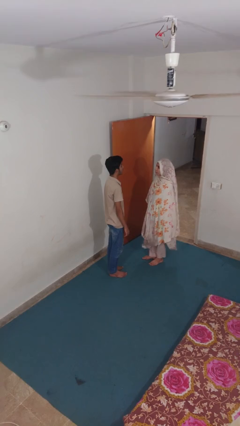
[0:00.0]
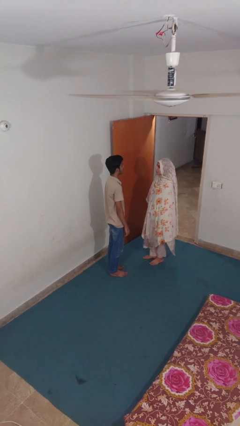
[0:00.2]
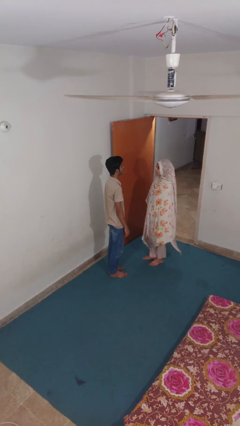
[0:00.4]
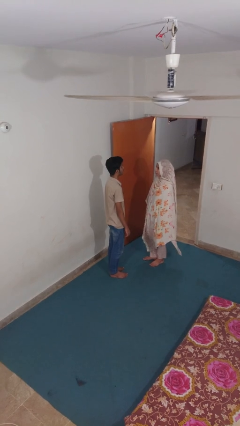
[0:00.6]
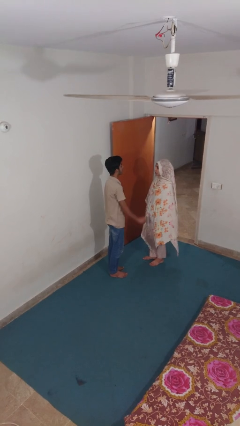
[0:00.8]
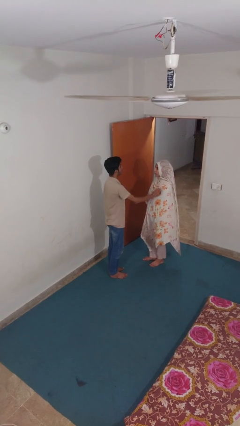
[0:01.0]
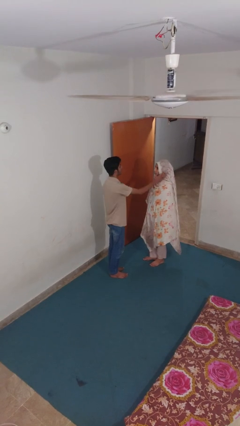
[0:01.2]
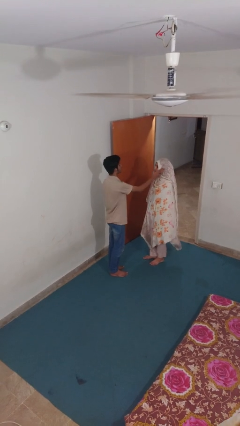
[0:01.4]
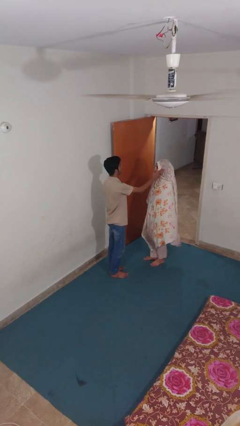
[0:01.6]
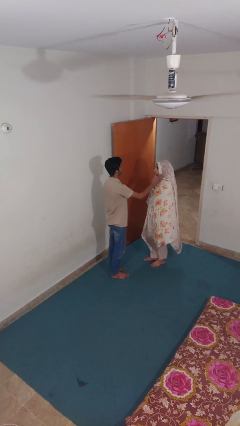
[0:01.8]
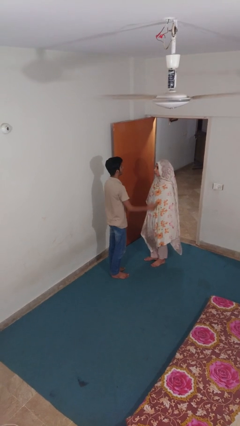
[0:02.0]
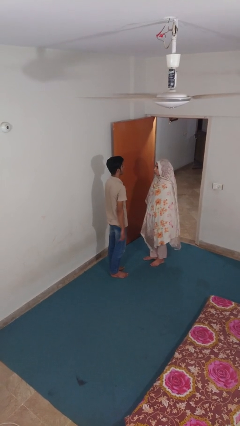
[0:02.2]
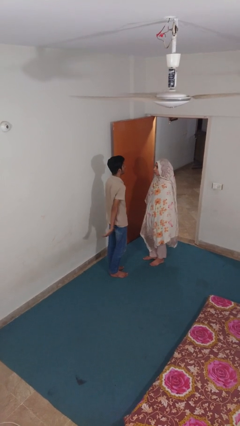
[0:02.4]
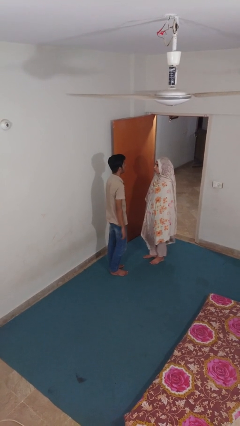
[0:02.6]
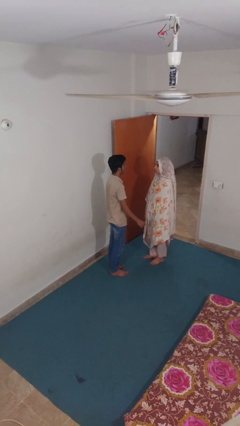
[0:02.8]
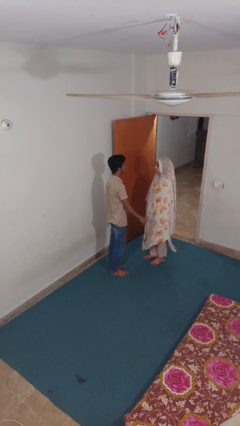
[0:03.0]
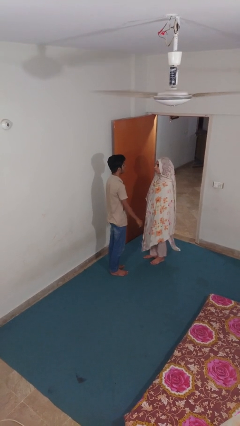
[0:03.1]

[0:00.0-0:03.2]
person touches face of person

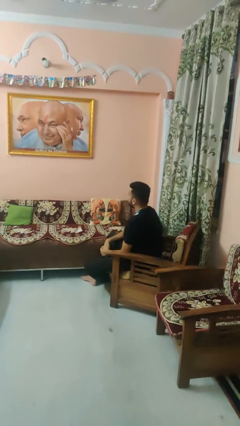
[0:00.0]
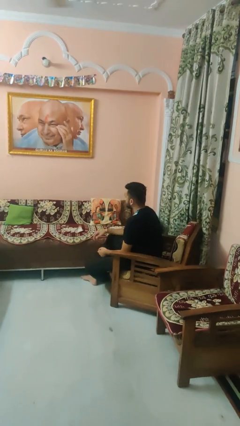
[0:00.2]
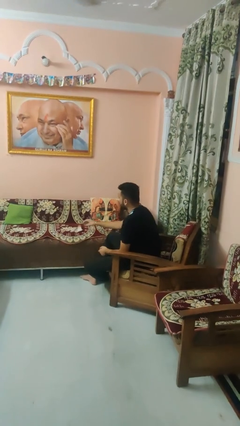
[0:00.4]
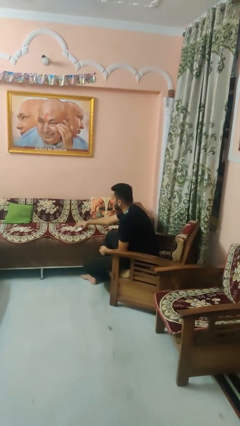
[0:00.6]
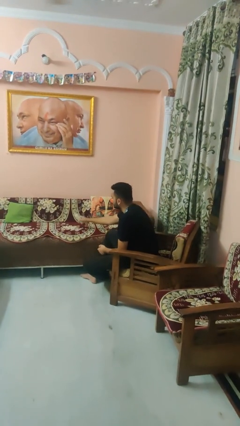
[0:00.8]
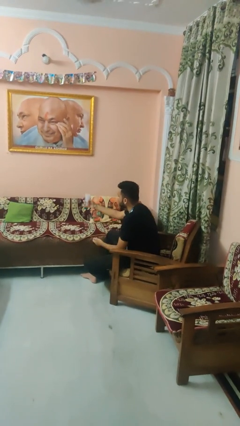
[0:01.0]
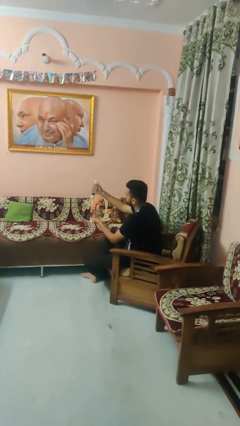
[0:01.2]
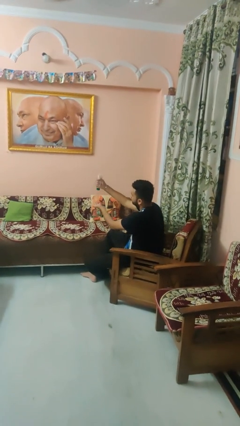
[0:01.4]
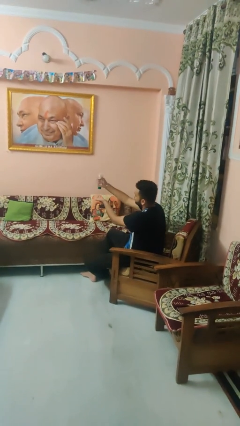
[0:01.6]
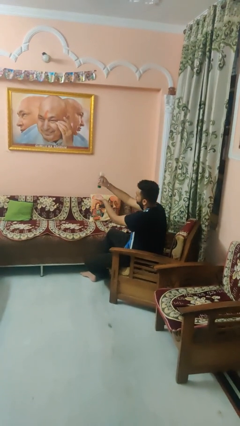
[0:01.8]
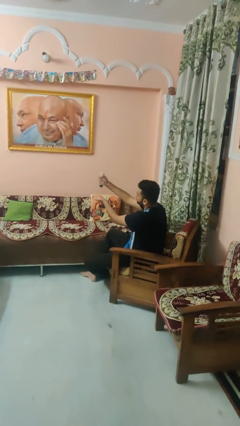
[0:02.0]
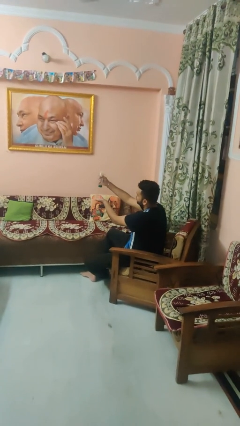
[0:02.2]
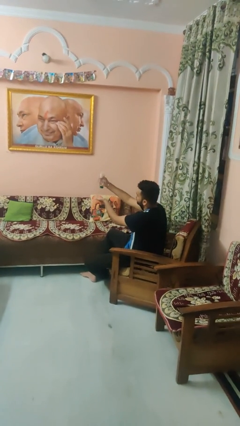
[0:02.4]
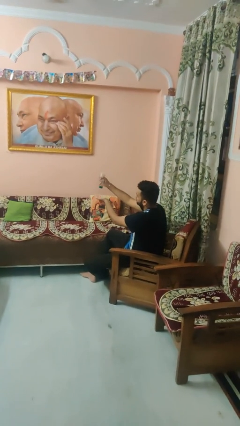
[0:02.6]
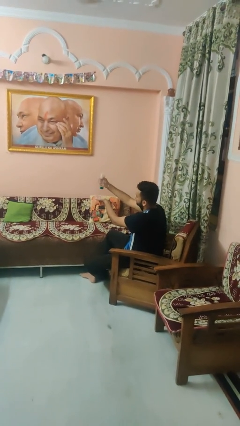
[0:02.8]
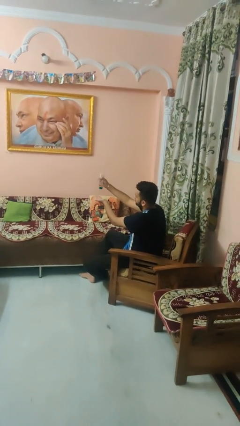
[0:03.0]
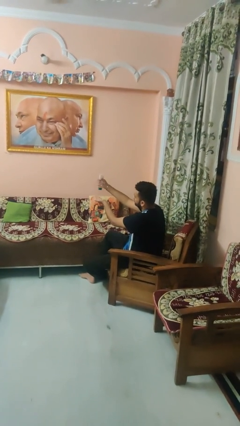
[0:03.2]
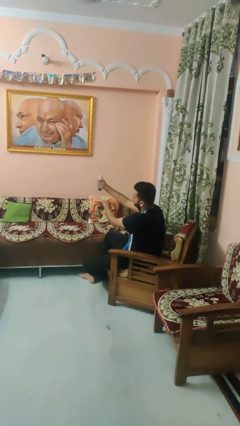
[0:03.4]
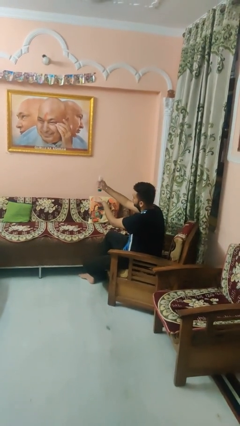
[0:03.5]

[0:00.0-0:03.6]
person squeezes object

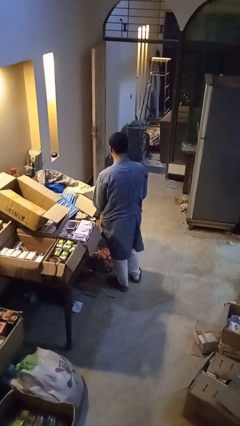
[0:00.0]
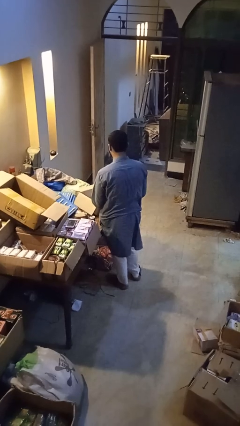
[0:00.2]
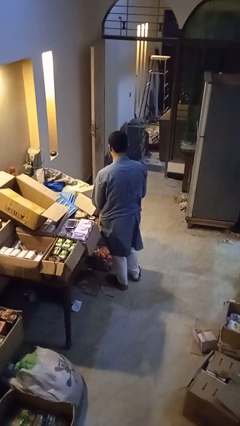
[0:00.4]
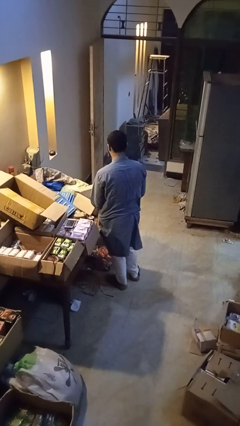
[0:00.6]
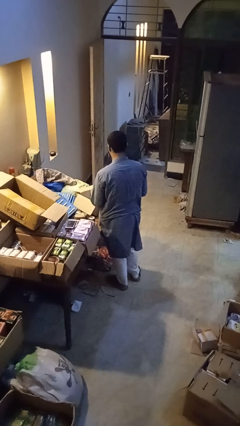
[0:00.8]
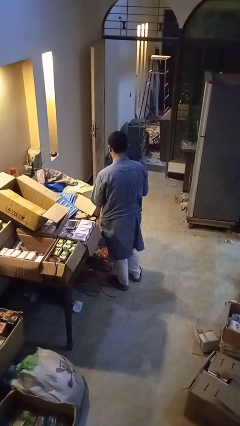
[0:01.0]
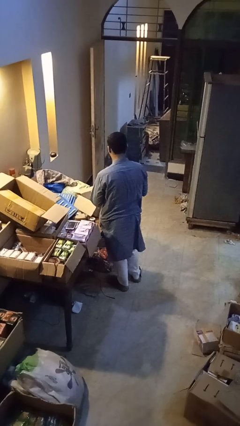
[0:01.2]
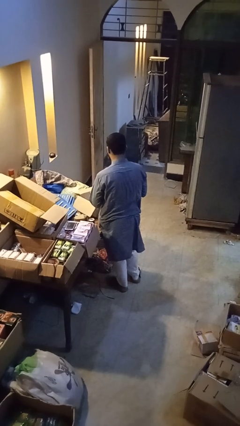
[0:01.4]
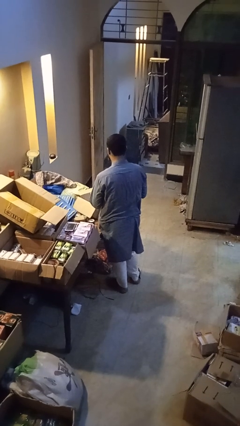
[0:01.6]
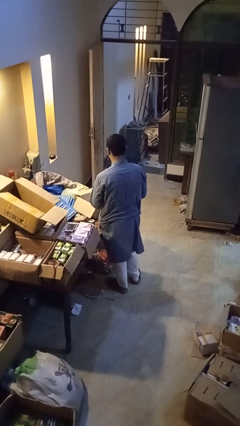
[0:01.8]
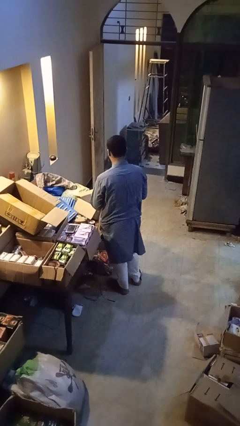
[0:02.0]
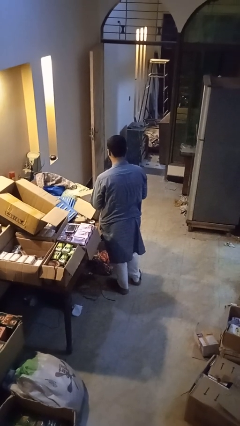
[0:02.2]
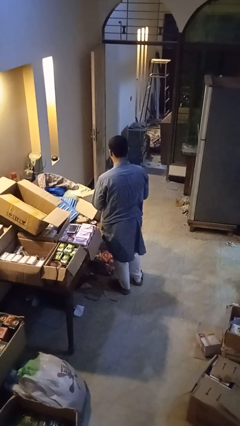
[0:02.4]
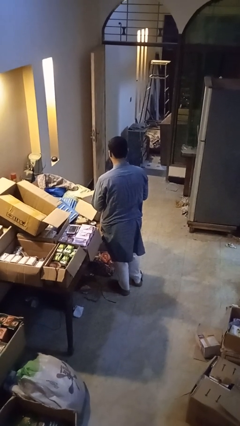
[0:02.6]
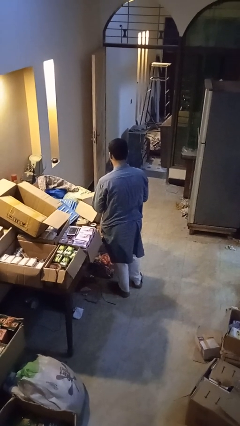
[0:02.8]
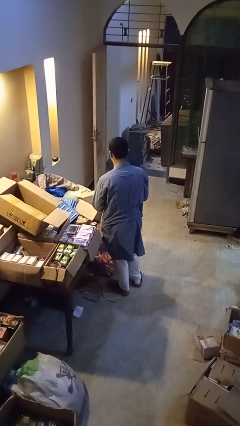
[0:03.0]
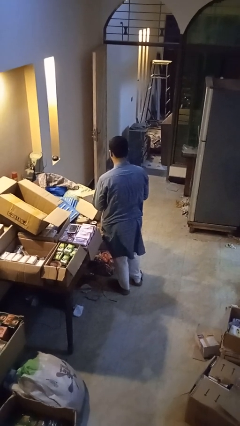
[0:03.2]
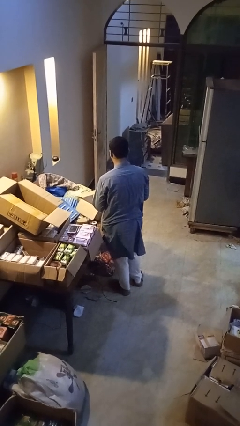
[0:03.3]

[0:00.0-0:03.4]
person takes object from box

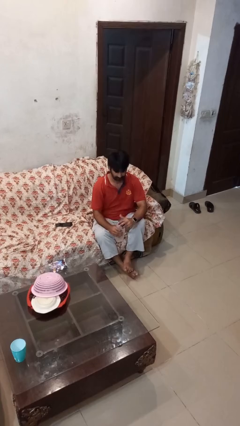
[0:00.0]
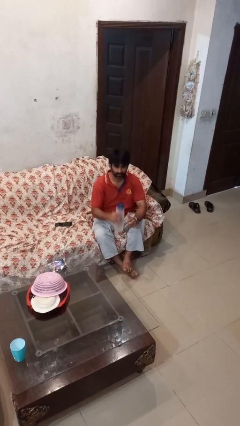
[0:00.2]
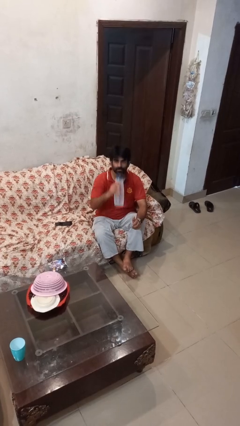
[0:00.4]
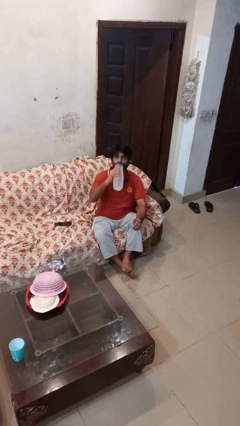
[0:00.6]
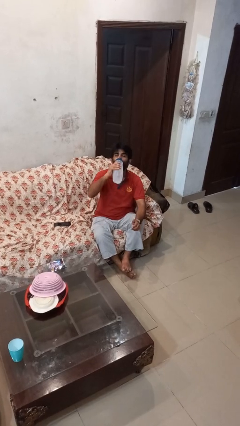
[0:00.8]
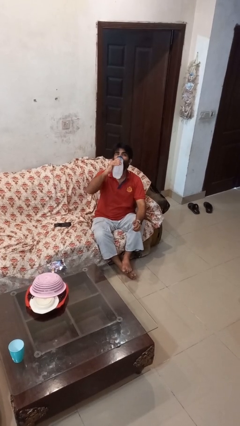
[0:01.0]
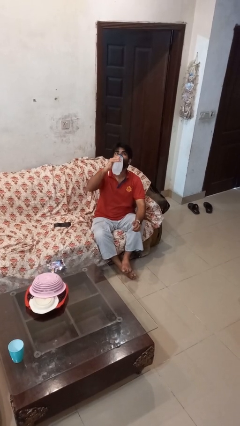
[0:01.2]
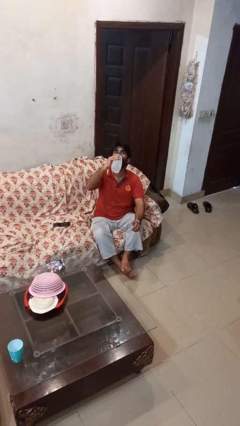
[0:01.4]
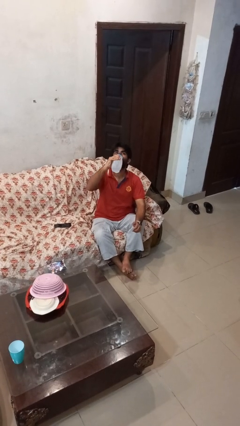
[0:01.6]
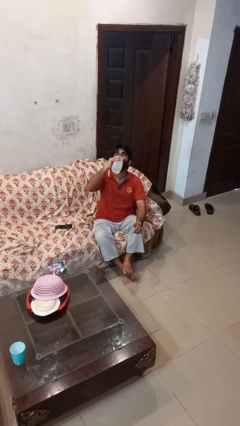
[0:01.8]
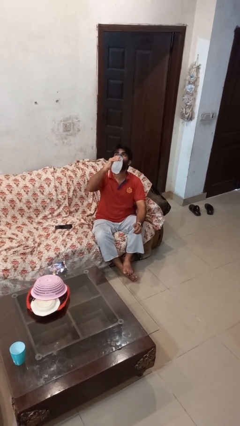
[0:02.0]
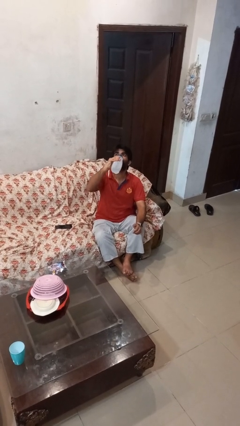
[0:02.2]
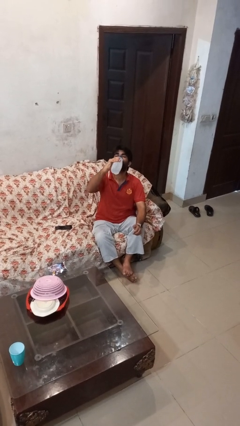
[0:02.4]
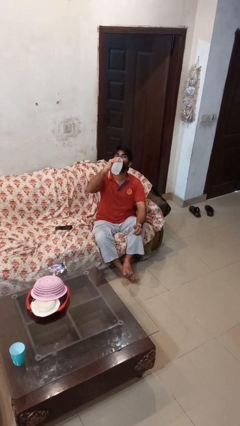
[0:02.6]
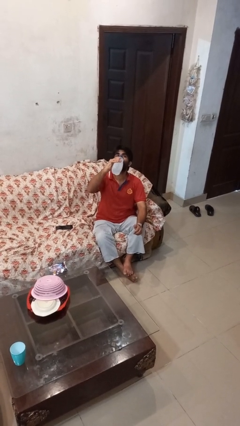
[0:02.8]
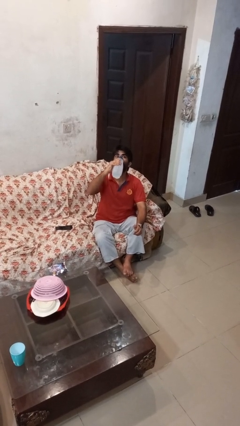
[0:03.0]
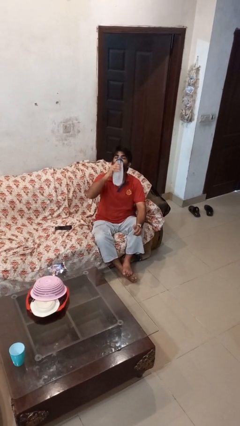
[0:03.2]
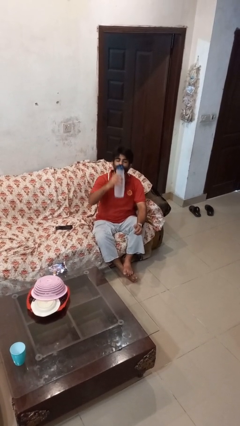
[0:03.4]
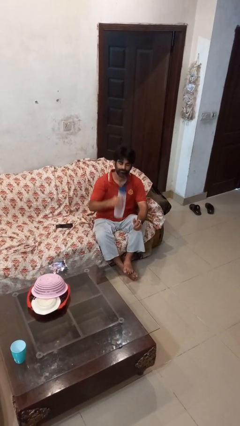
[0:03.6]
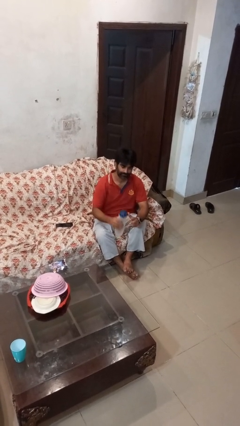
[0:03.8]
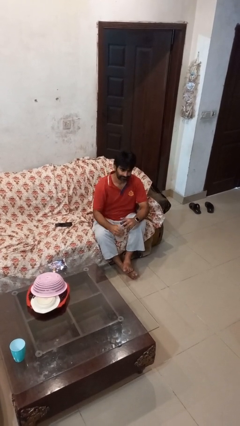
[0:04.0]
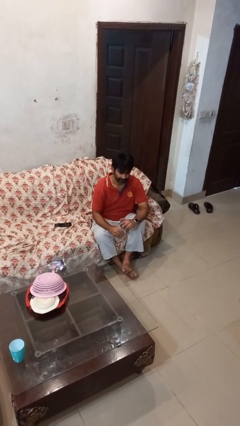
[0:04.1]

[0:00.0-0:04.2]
person drinks from bottle

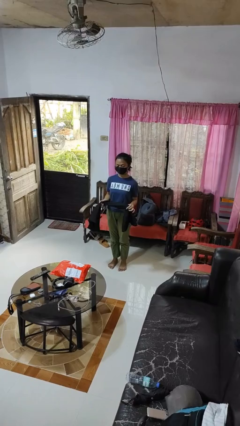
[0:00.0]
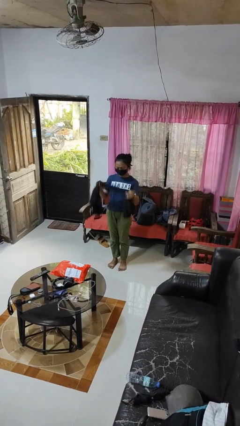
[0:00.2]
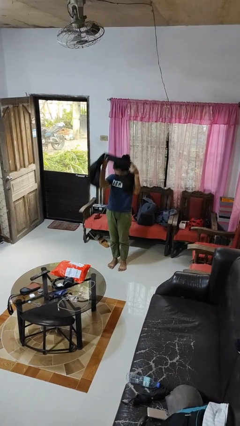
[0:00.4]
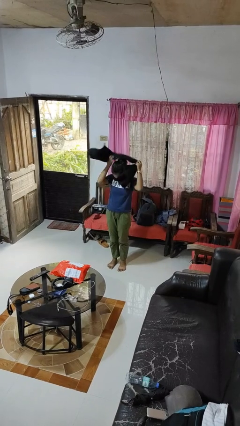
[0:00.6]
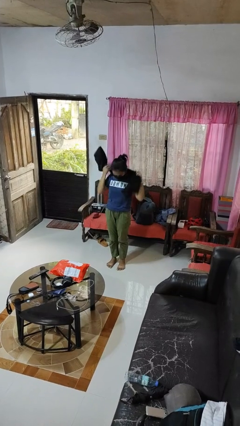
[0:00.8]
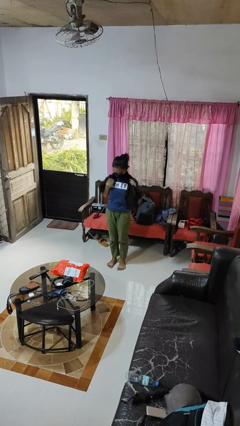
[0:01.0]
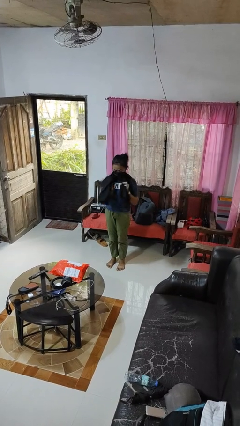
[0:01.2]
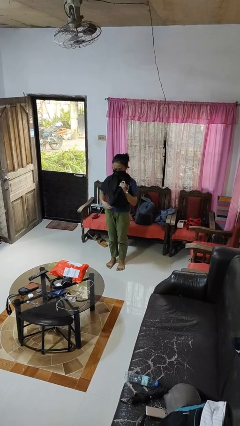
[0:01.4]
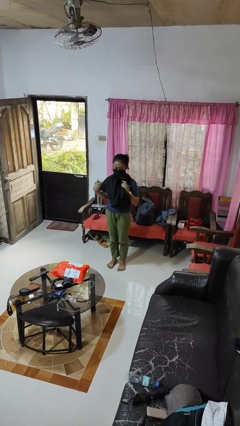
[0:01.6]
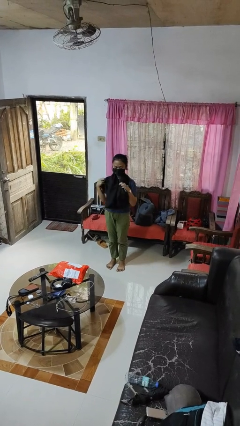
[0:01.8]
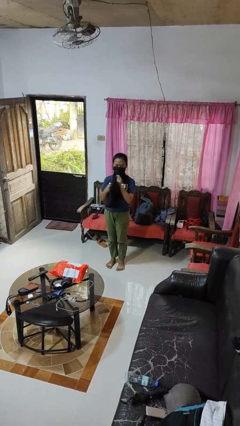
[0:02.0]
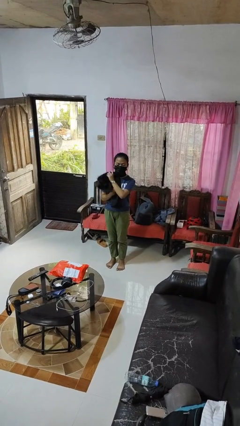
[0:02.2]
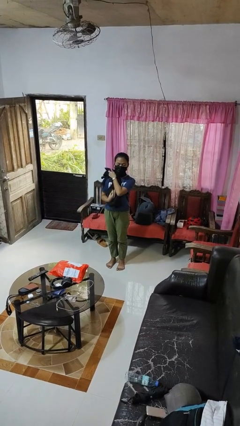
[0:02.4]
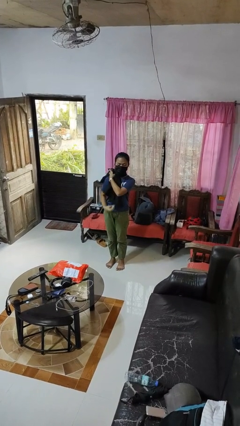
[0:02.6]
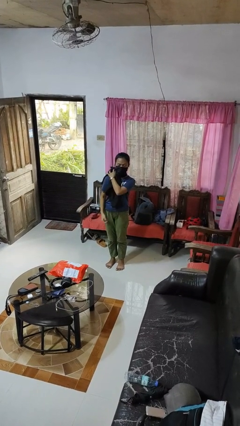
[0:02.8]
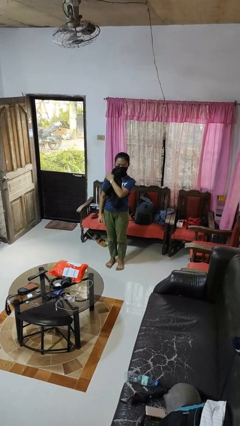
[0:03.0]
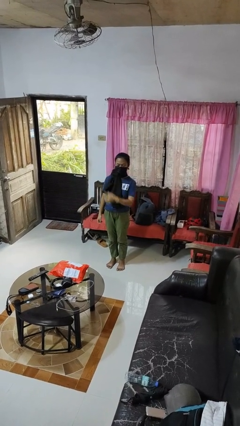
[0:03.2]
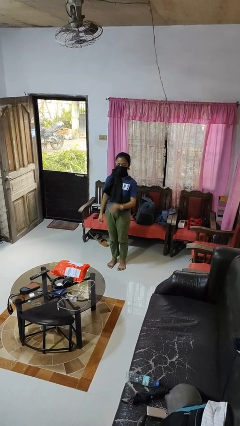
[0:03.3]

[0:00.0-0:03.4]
person puts on scarf

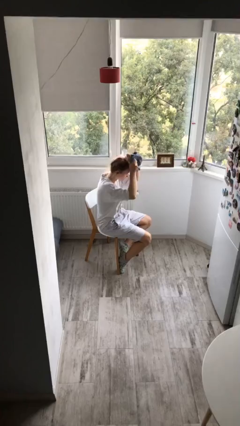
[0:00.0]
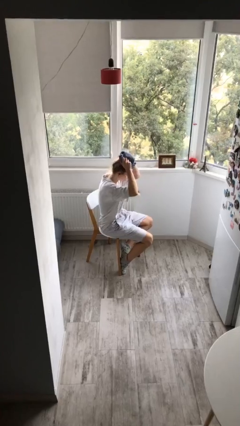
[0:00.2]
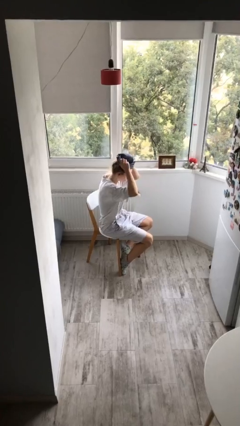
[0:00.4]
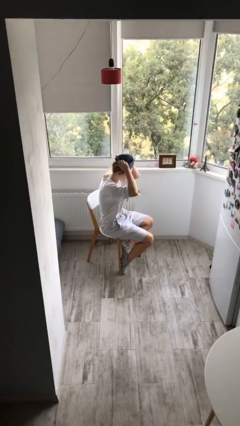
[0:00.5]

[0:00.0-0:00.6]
person puts on hat
